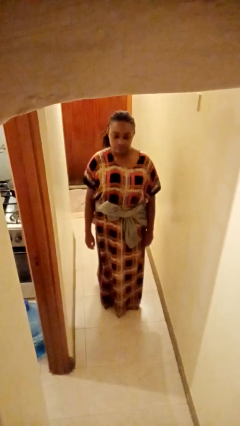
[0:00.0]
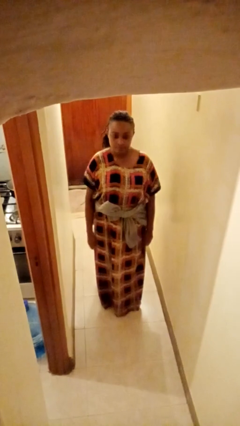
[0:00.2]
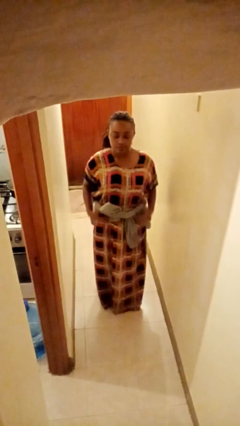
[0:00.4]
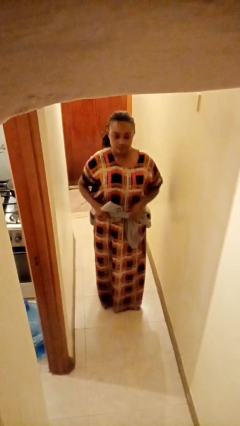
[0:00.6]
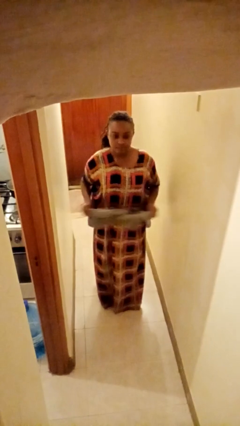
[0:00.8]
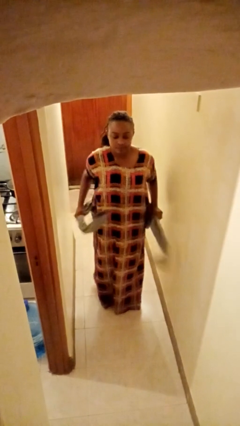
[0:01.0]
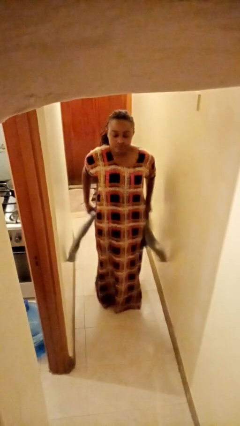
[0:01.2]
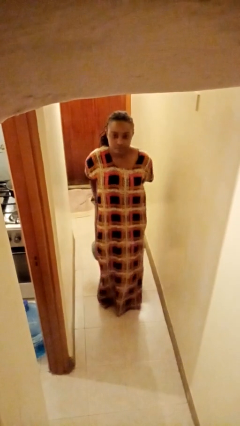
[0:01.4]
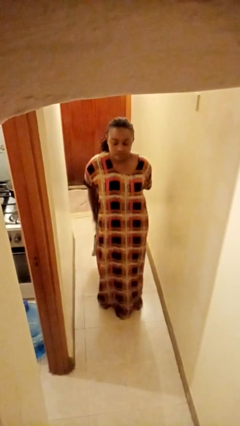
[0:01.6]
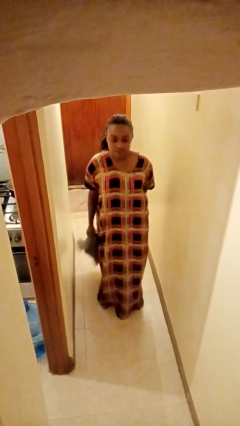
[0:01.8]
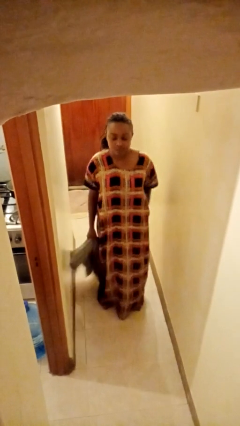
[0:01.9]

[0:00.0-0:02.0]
person unties jacket around waist

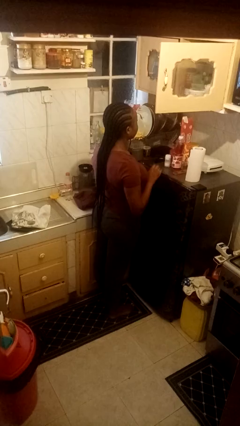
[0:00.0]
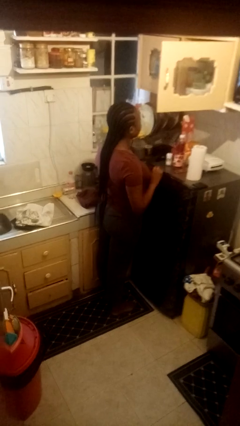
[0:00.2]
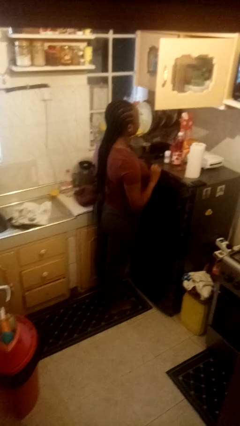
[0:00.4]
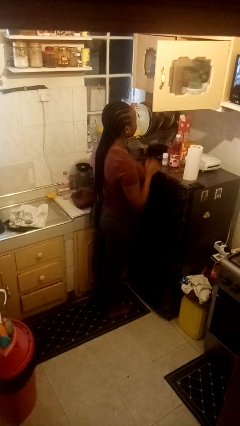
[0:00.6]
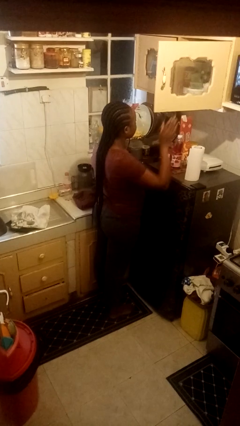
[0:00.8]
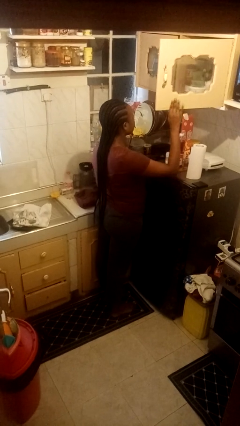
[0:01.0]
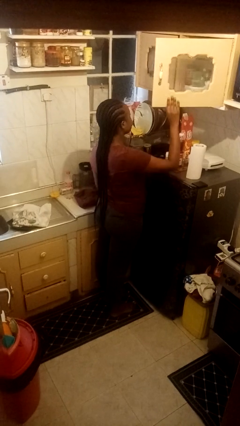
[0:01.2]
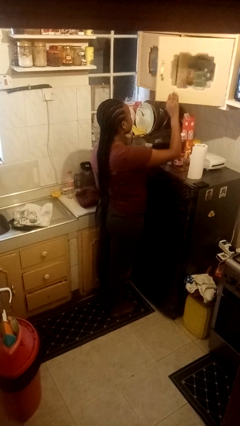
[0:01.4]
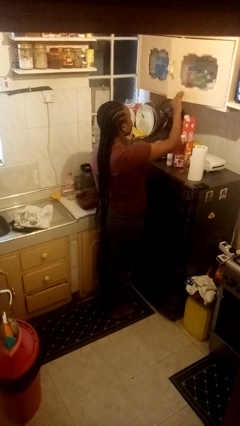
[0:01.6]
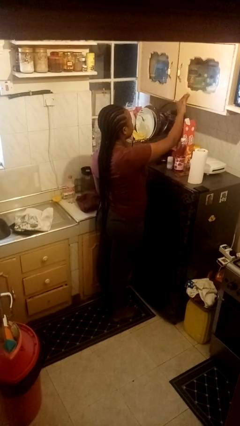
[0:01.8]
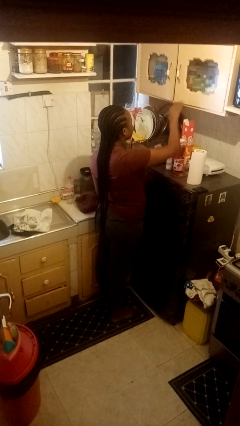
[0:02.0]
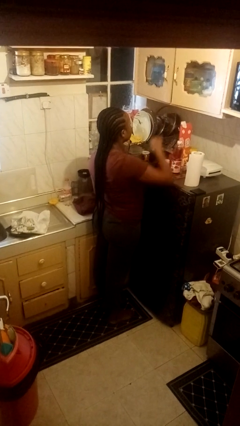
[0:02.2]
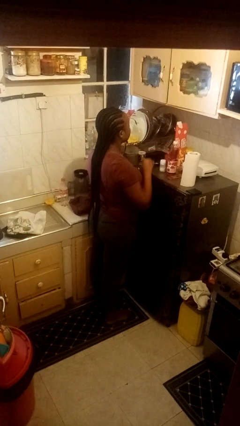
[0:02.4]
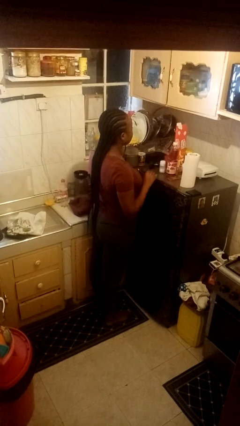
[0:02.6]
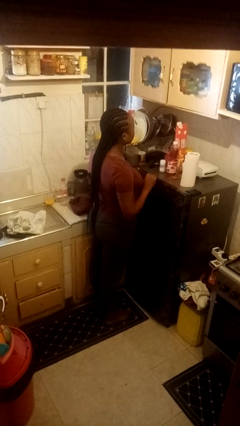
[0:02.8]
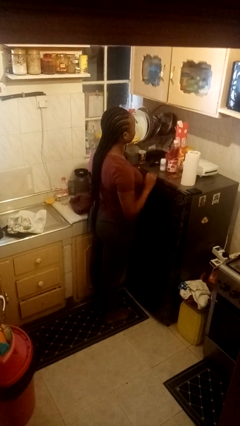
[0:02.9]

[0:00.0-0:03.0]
person closes cabinet

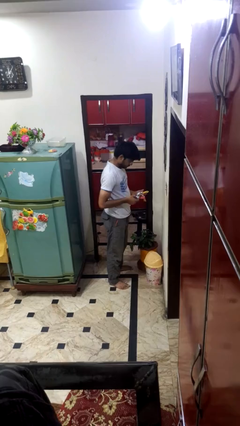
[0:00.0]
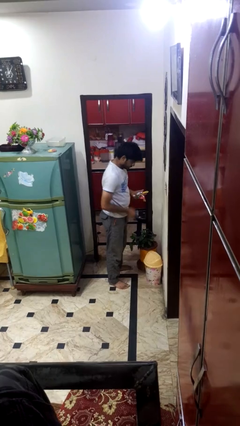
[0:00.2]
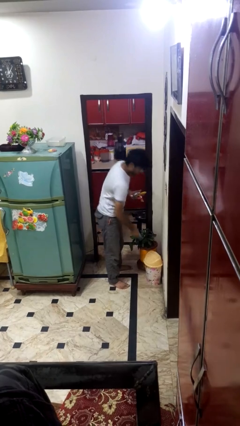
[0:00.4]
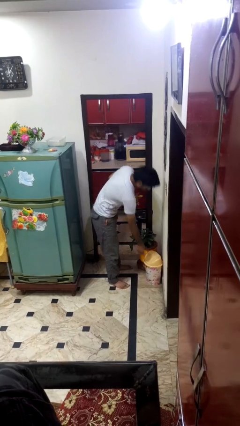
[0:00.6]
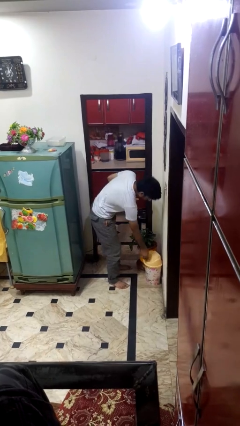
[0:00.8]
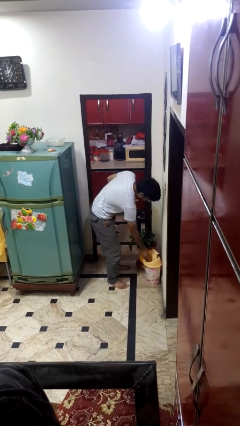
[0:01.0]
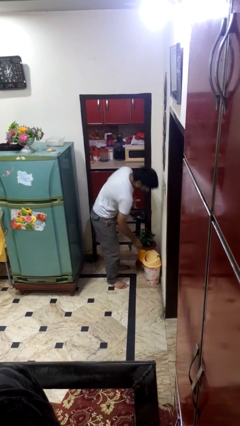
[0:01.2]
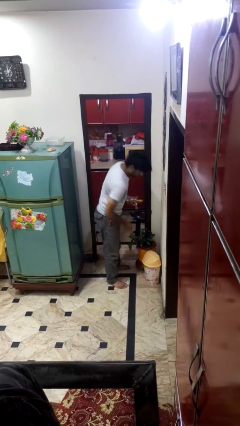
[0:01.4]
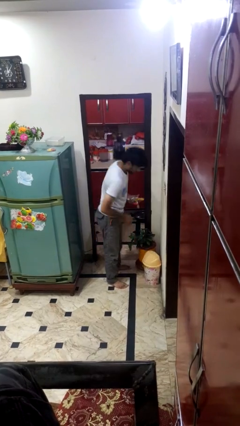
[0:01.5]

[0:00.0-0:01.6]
person discards trash

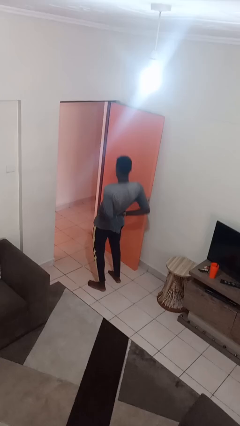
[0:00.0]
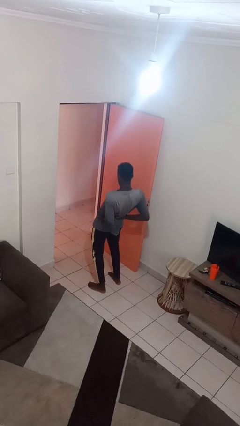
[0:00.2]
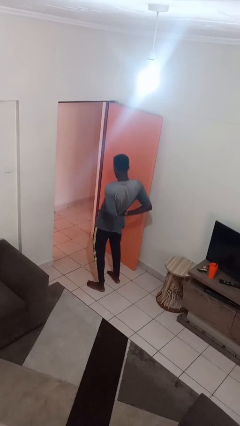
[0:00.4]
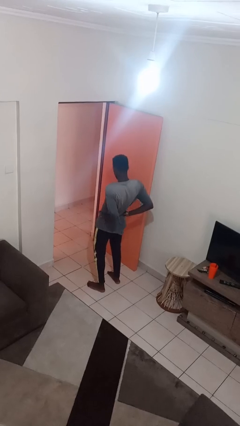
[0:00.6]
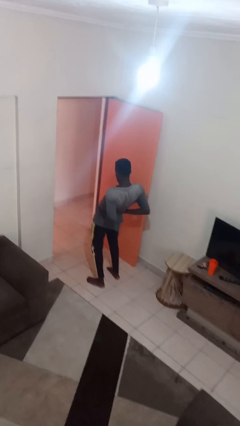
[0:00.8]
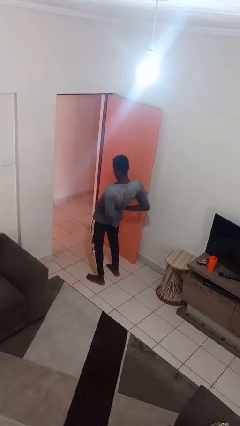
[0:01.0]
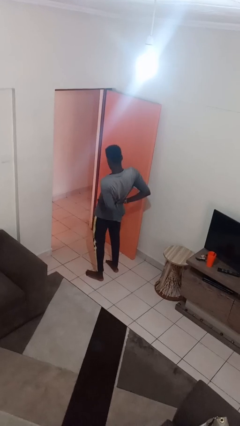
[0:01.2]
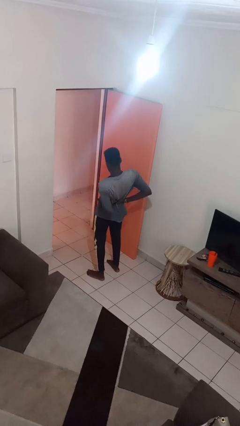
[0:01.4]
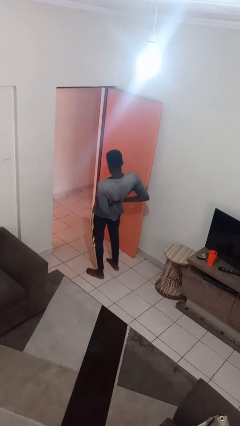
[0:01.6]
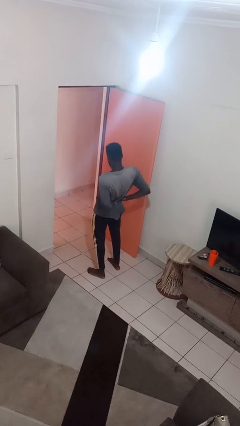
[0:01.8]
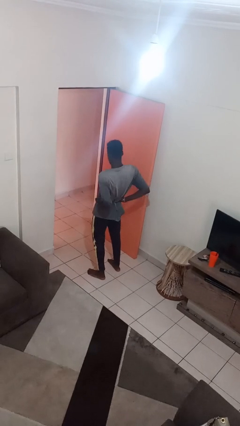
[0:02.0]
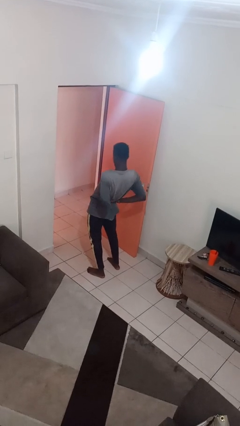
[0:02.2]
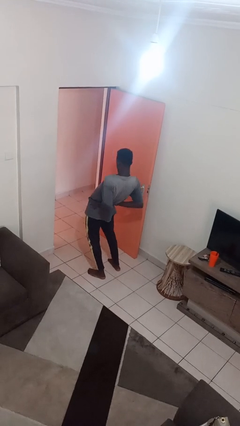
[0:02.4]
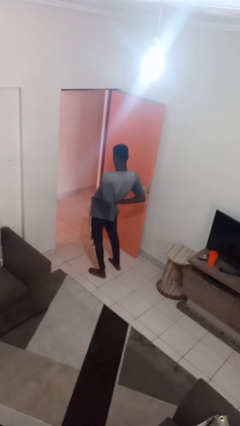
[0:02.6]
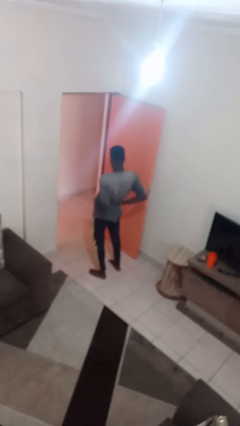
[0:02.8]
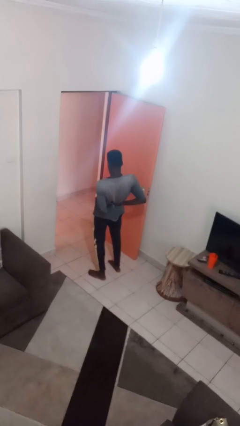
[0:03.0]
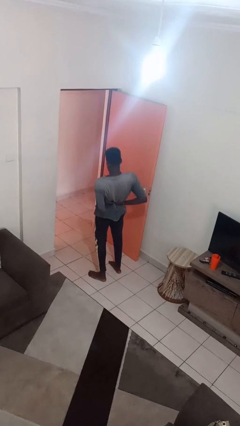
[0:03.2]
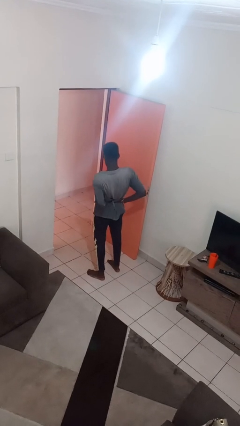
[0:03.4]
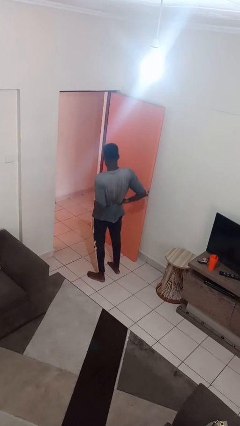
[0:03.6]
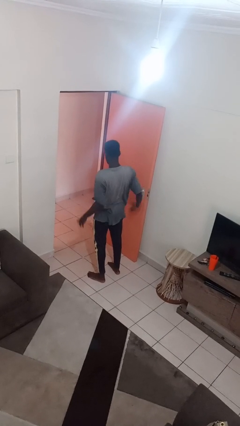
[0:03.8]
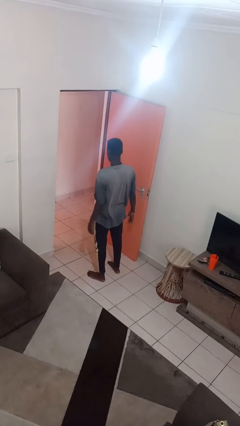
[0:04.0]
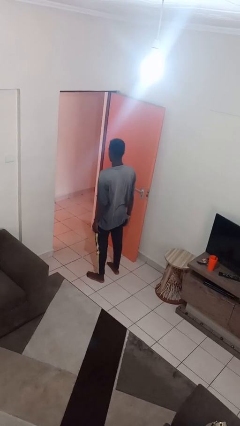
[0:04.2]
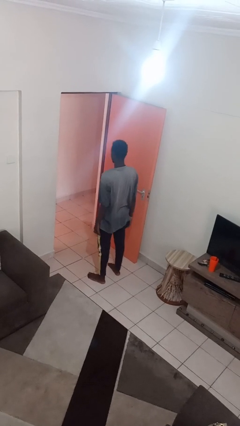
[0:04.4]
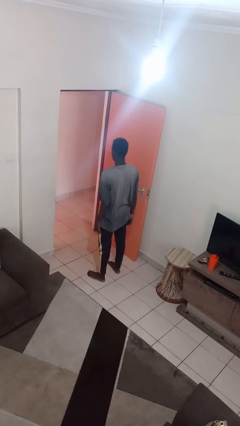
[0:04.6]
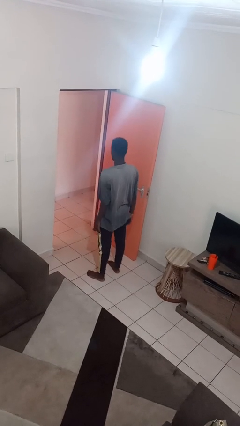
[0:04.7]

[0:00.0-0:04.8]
person stretches back

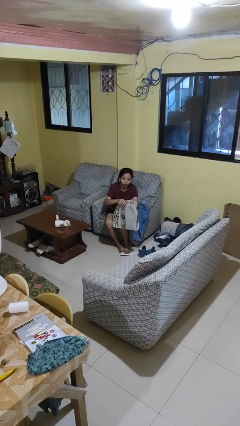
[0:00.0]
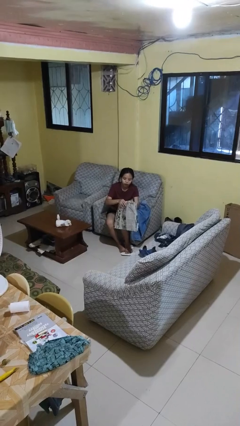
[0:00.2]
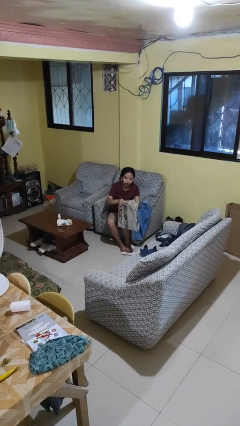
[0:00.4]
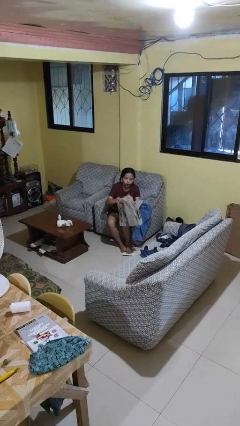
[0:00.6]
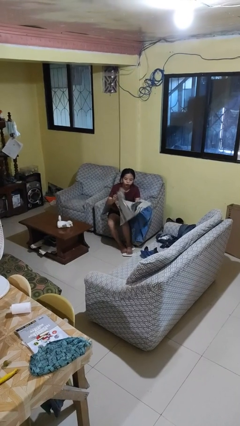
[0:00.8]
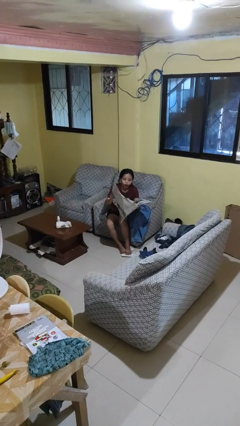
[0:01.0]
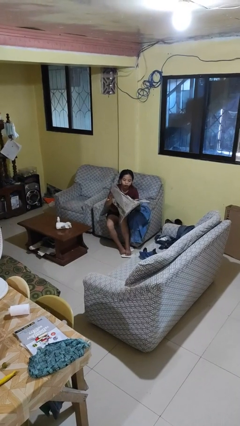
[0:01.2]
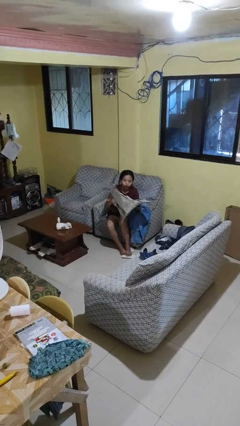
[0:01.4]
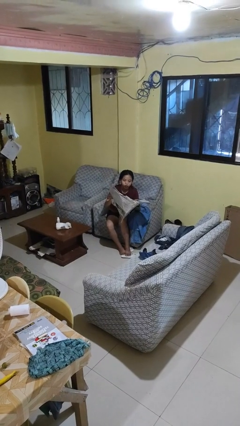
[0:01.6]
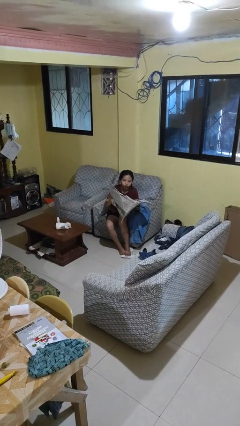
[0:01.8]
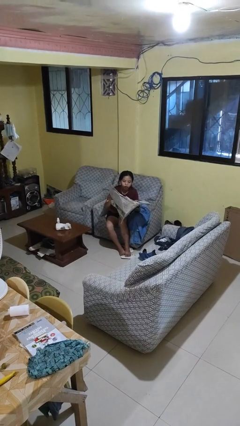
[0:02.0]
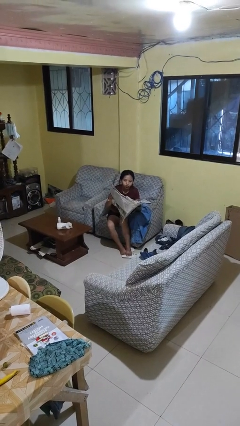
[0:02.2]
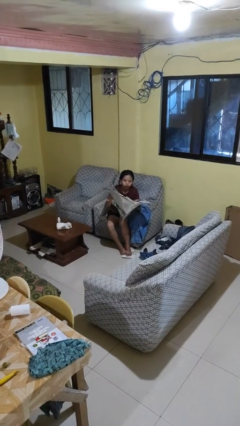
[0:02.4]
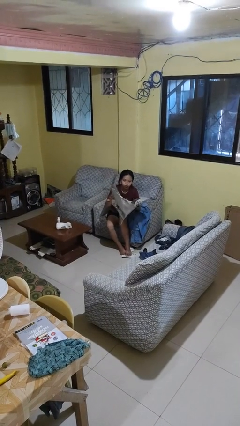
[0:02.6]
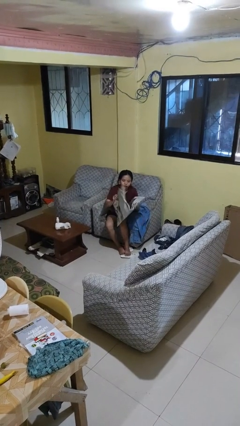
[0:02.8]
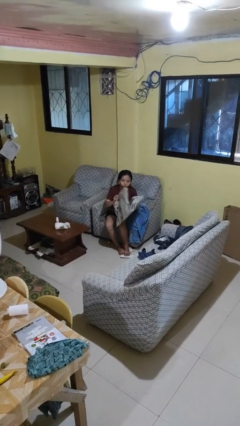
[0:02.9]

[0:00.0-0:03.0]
person reads newspaper

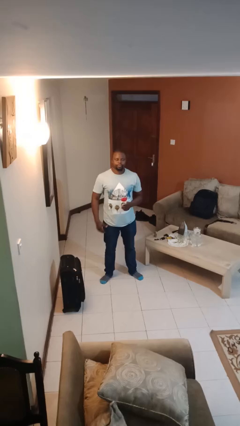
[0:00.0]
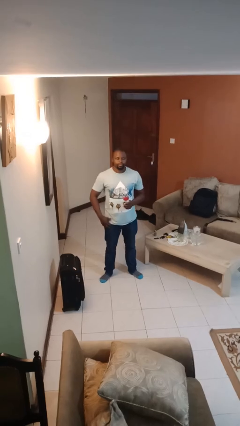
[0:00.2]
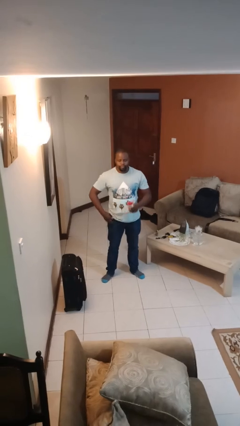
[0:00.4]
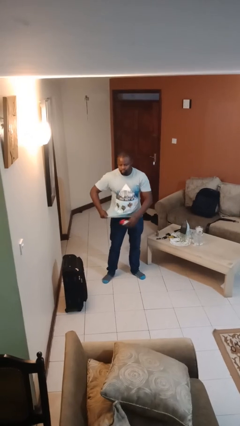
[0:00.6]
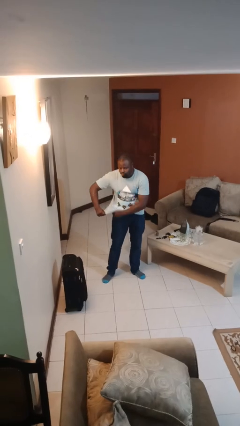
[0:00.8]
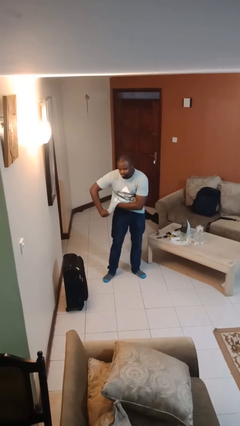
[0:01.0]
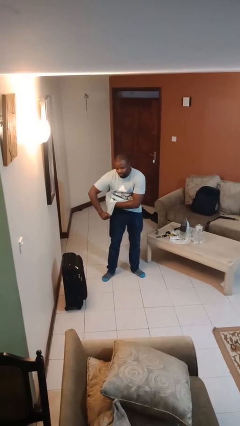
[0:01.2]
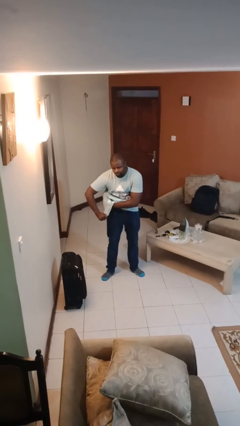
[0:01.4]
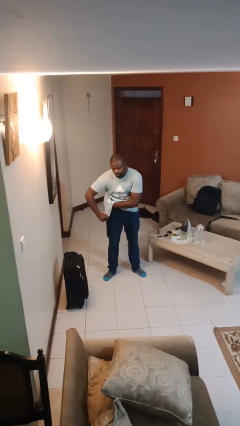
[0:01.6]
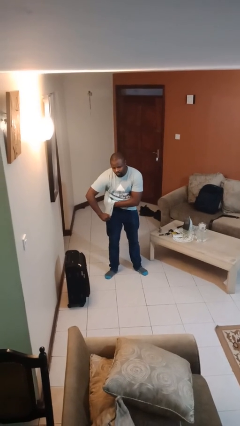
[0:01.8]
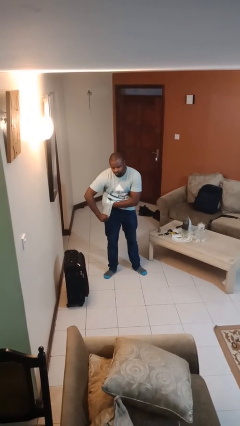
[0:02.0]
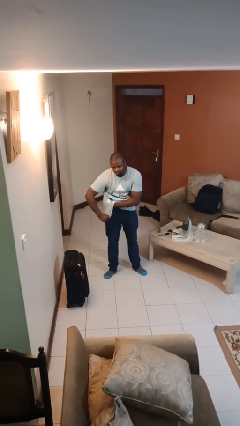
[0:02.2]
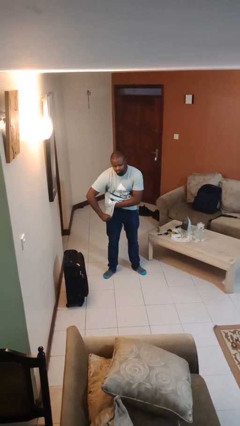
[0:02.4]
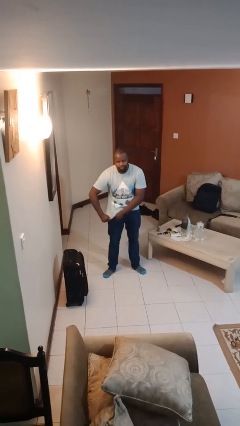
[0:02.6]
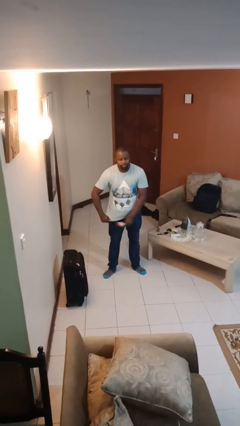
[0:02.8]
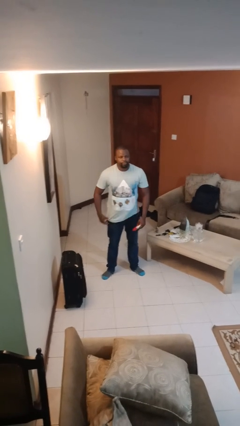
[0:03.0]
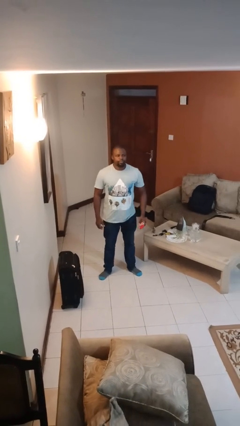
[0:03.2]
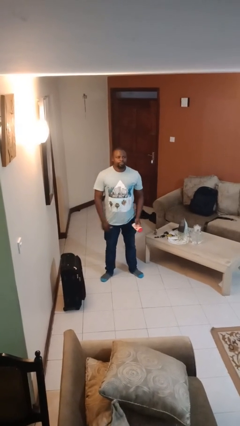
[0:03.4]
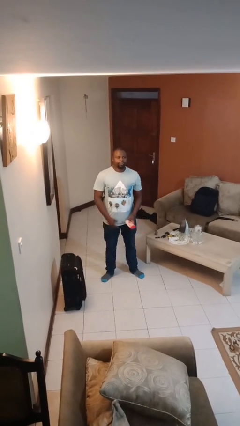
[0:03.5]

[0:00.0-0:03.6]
person applies deodorant
